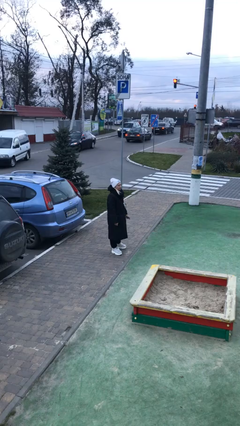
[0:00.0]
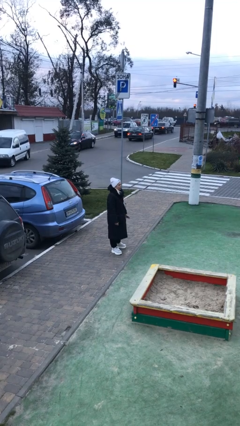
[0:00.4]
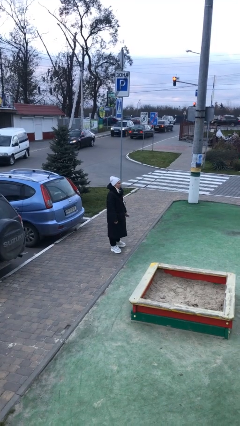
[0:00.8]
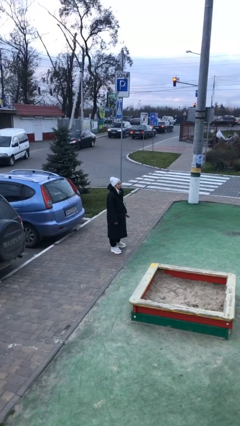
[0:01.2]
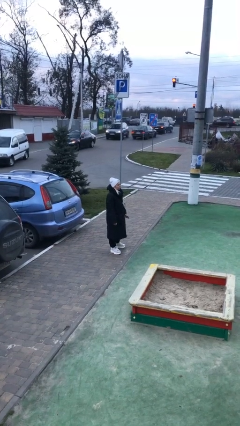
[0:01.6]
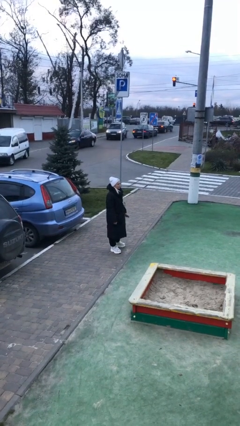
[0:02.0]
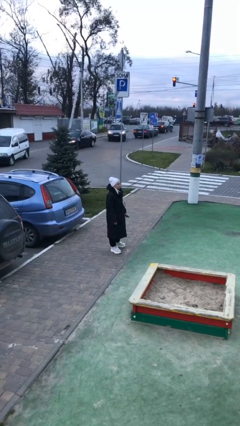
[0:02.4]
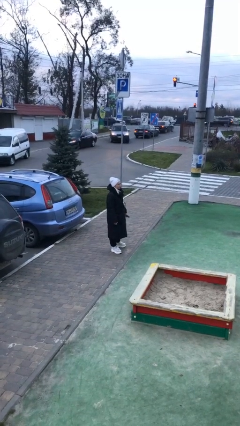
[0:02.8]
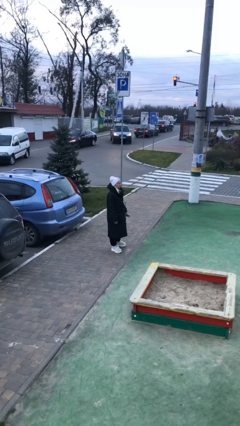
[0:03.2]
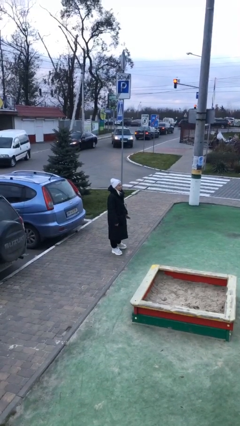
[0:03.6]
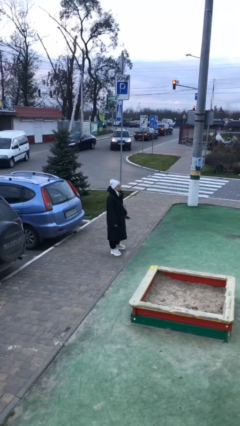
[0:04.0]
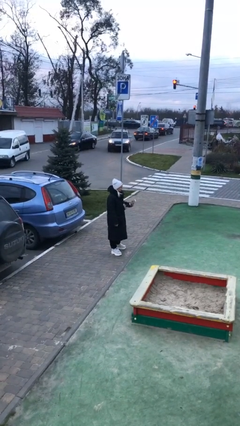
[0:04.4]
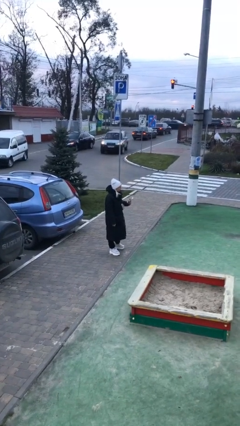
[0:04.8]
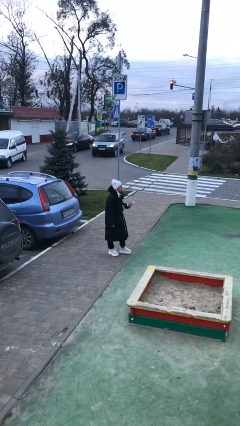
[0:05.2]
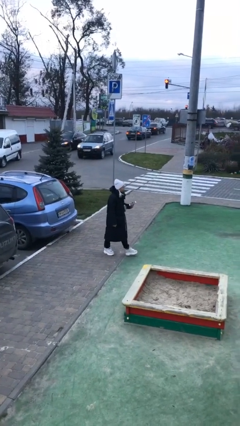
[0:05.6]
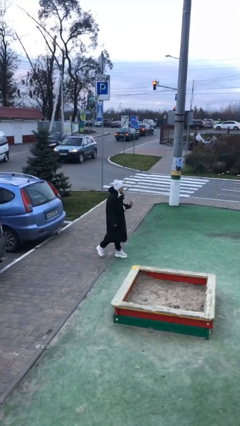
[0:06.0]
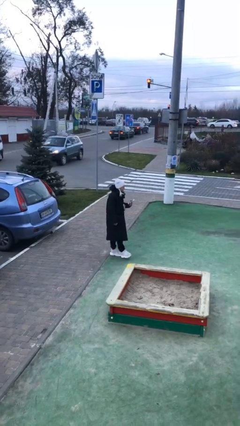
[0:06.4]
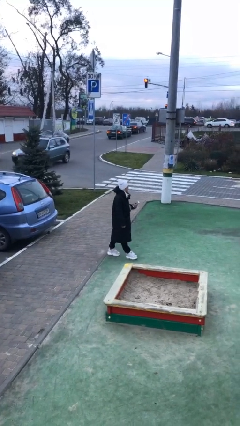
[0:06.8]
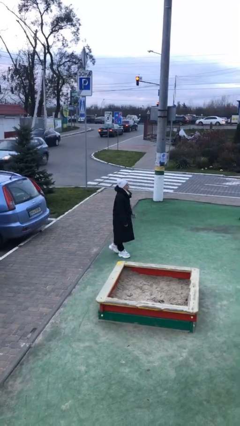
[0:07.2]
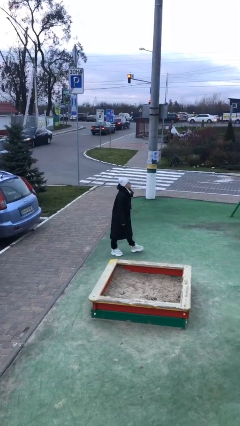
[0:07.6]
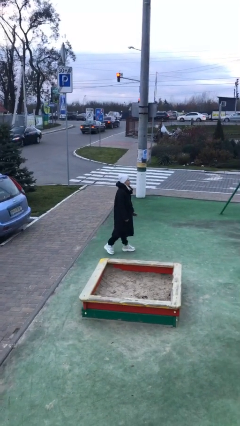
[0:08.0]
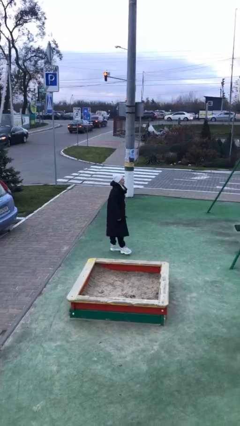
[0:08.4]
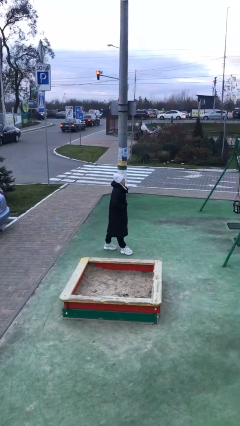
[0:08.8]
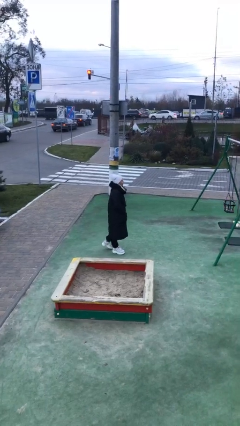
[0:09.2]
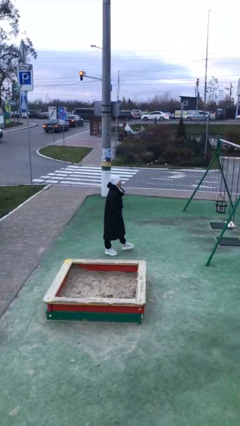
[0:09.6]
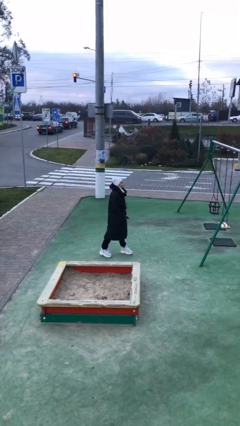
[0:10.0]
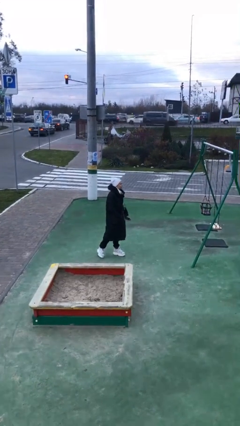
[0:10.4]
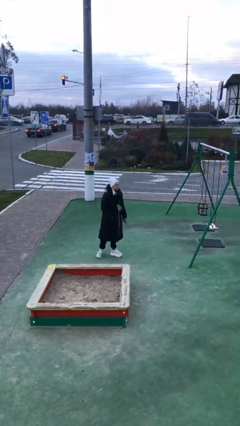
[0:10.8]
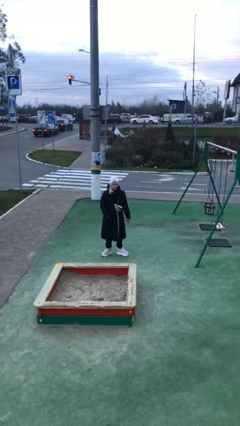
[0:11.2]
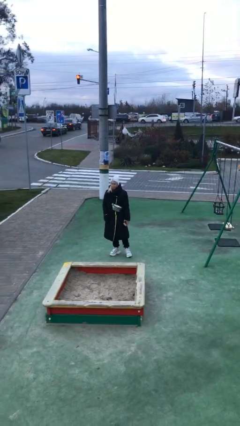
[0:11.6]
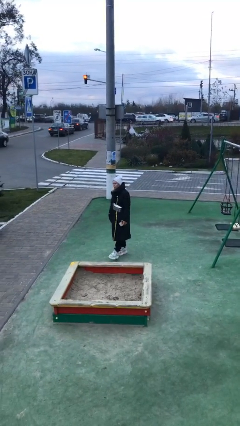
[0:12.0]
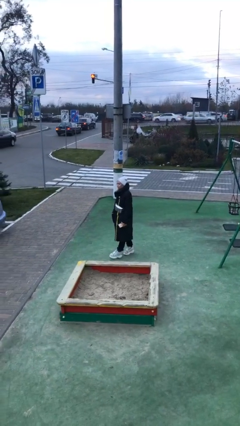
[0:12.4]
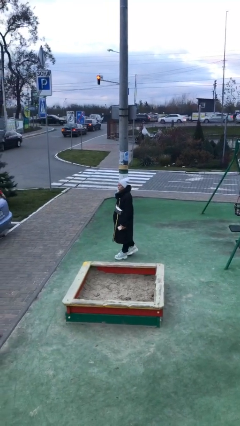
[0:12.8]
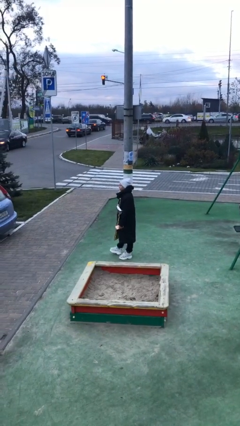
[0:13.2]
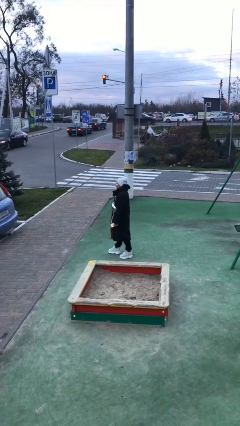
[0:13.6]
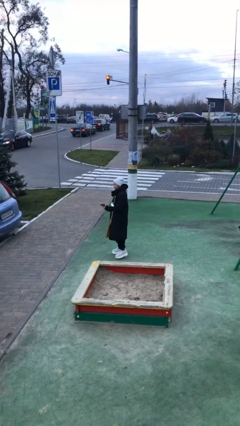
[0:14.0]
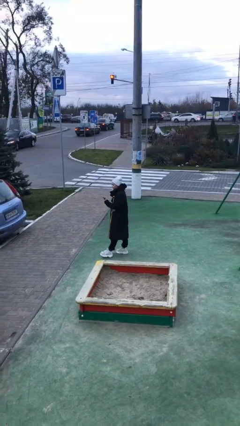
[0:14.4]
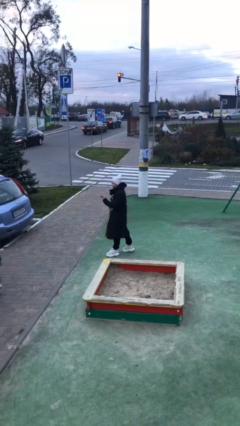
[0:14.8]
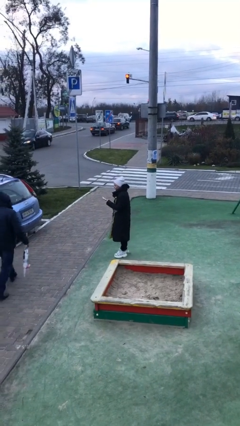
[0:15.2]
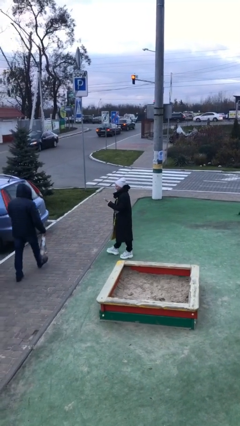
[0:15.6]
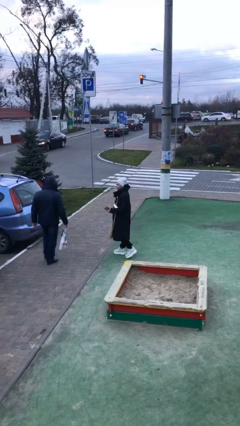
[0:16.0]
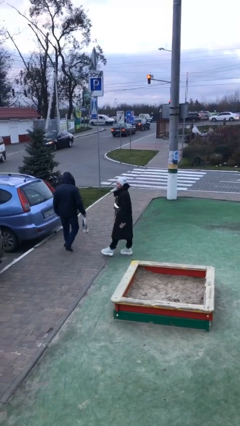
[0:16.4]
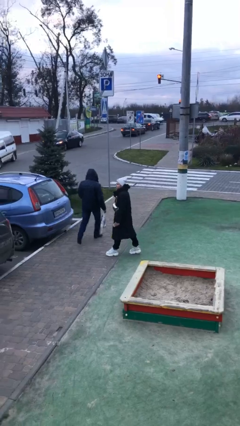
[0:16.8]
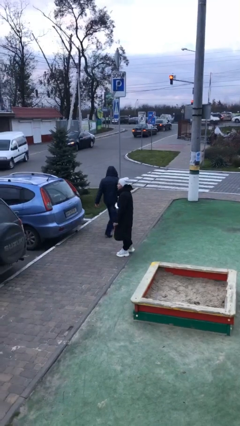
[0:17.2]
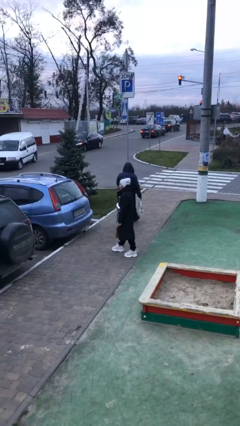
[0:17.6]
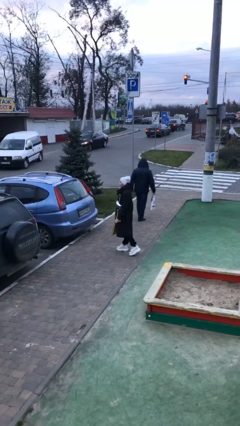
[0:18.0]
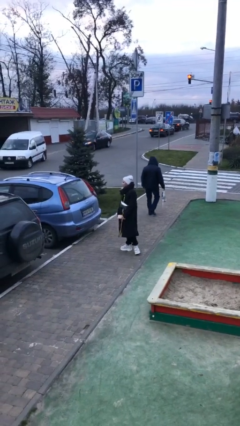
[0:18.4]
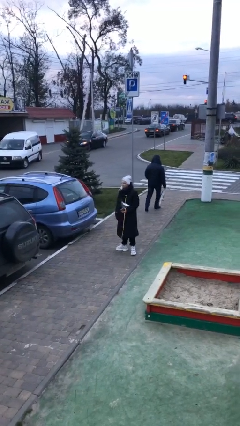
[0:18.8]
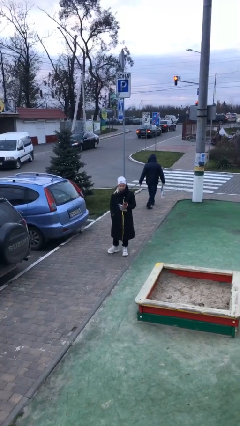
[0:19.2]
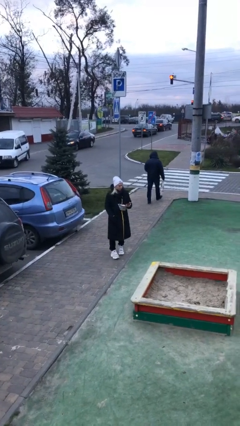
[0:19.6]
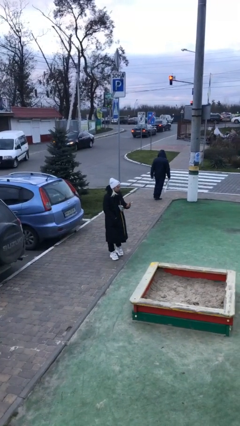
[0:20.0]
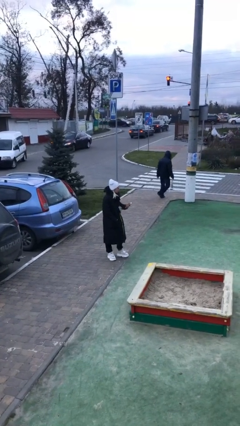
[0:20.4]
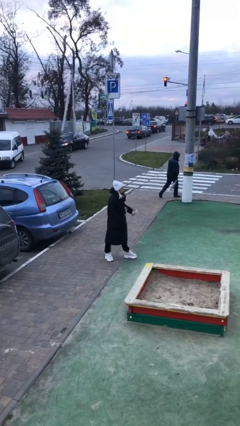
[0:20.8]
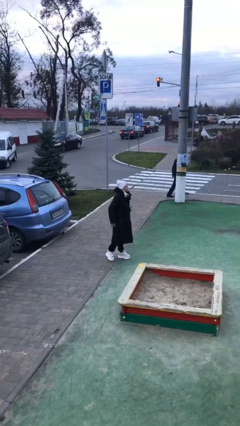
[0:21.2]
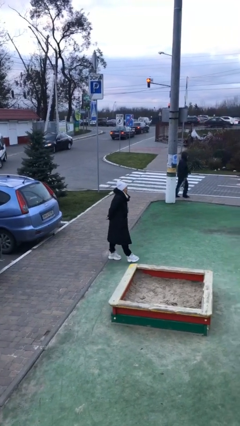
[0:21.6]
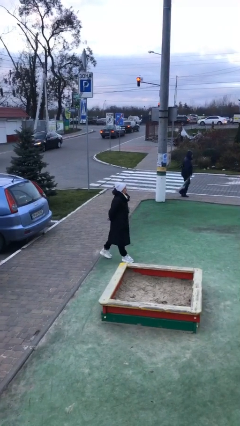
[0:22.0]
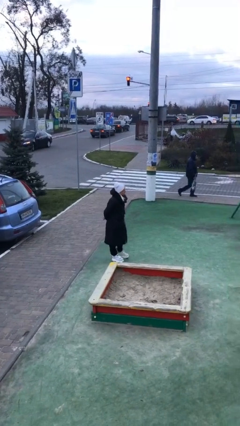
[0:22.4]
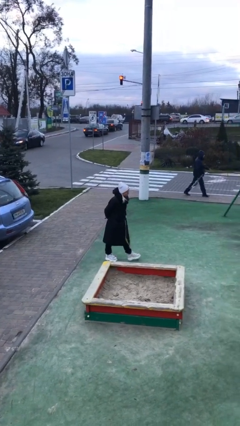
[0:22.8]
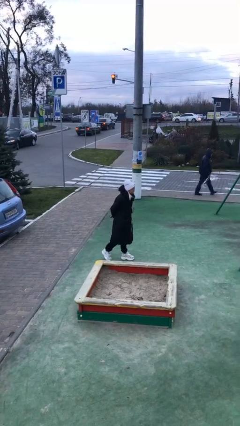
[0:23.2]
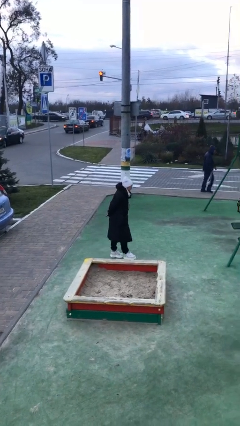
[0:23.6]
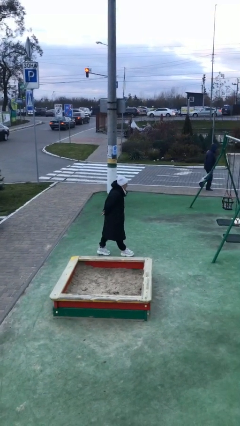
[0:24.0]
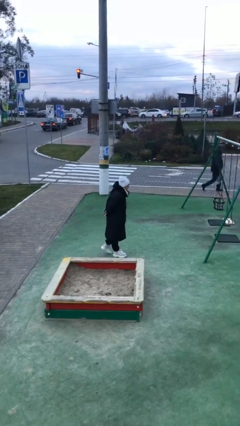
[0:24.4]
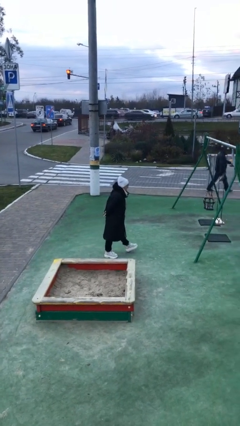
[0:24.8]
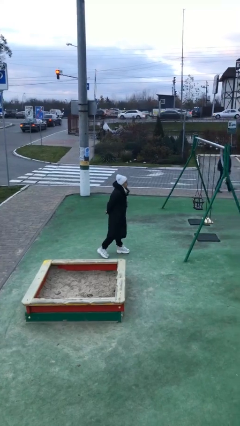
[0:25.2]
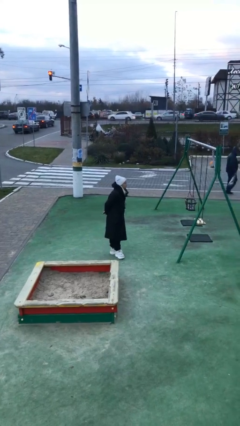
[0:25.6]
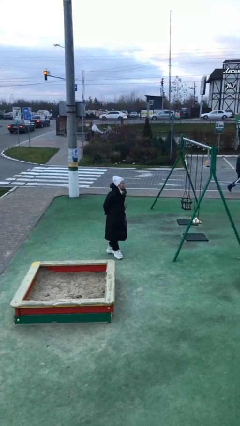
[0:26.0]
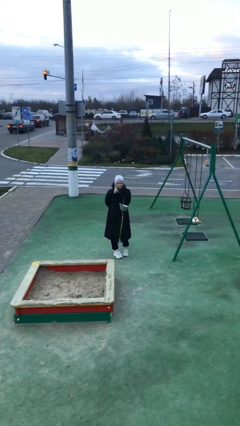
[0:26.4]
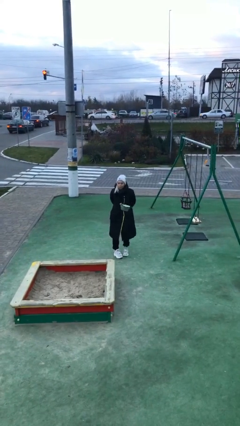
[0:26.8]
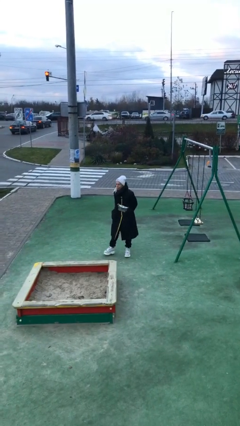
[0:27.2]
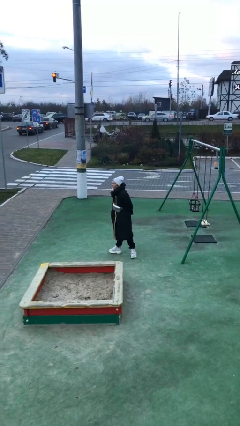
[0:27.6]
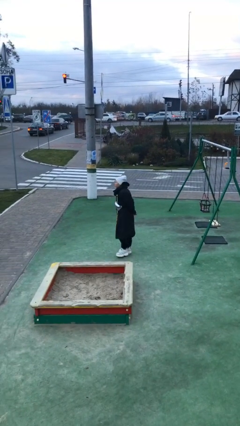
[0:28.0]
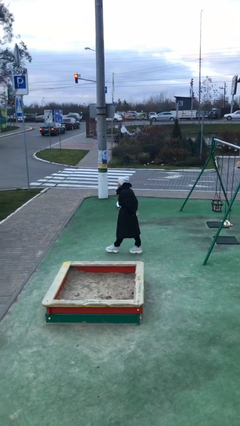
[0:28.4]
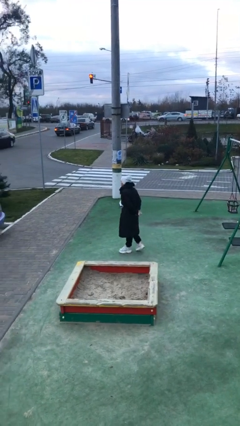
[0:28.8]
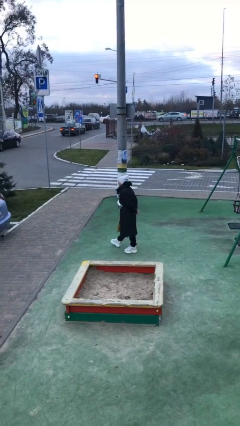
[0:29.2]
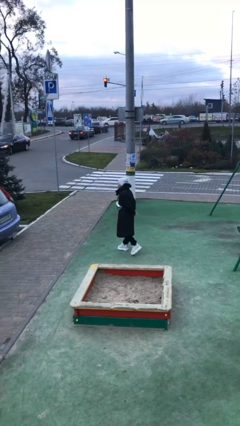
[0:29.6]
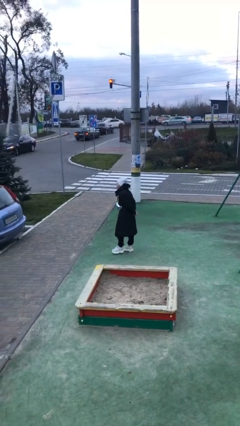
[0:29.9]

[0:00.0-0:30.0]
person walks

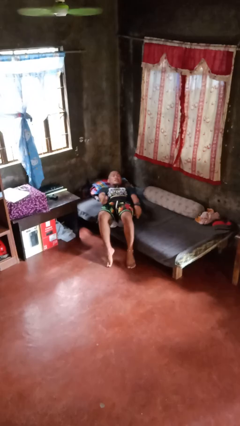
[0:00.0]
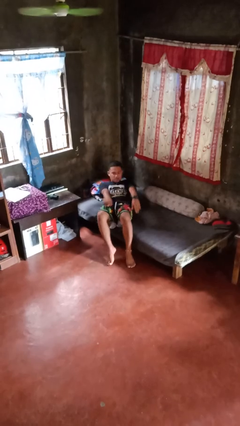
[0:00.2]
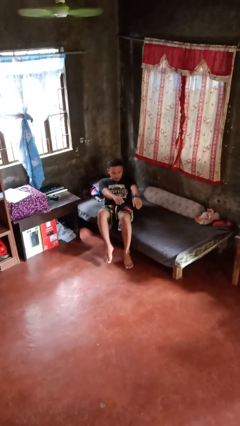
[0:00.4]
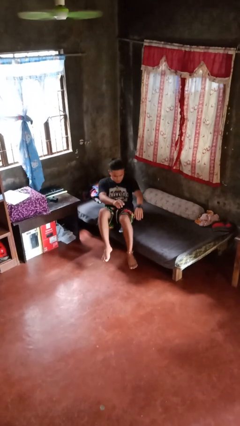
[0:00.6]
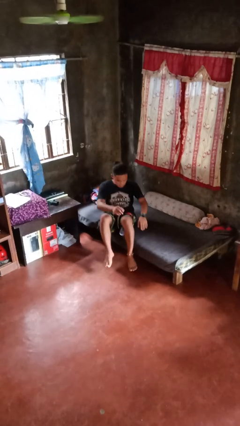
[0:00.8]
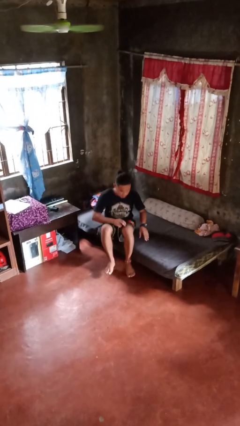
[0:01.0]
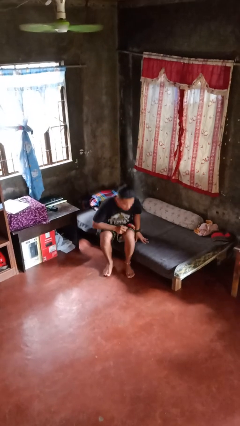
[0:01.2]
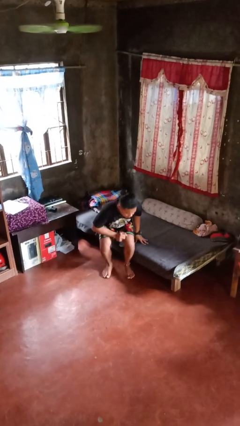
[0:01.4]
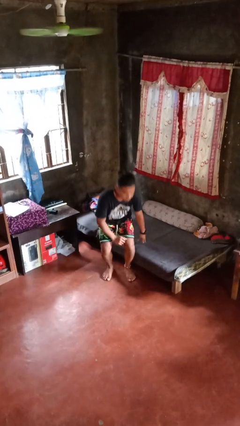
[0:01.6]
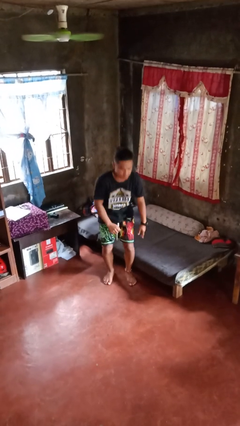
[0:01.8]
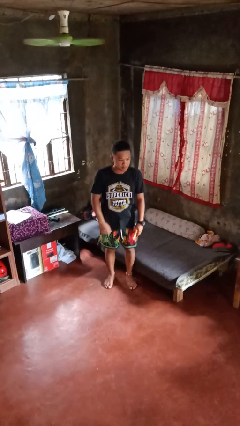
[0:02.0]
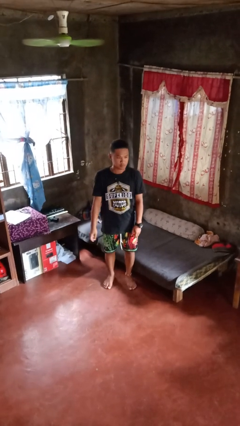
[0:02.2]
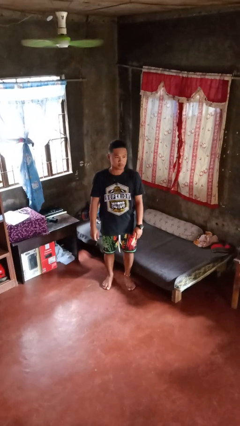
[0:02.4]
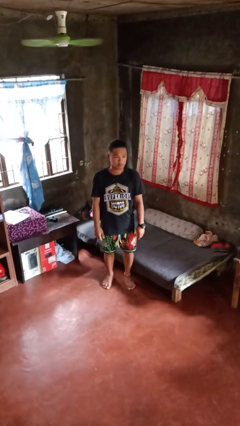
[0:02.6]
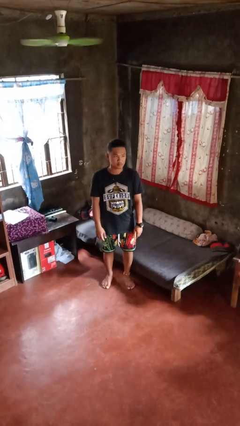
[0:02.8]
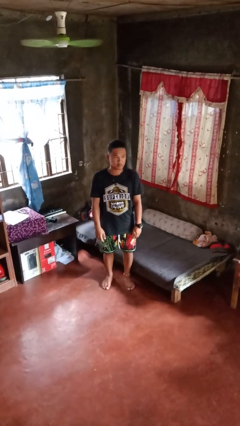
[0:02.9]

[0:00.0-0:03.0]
person stands up
